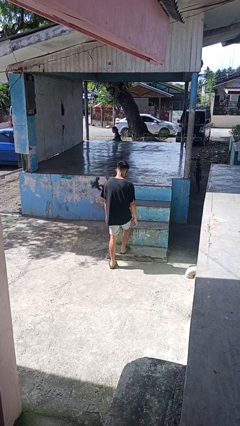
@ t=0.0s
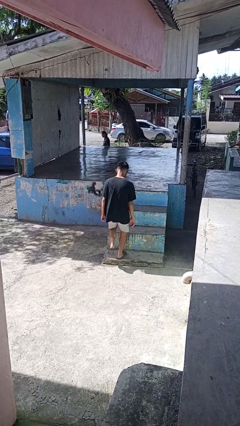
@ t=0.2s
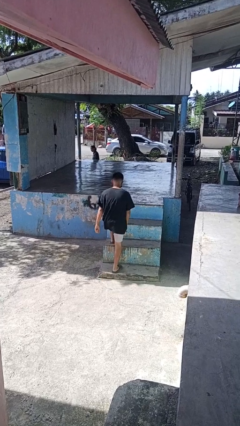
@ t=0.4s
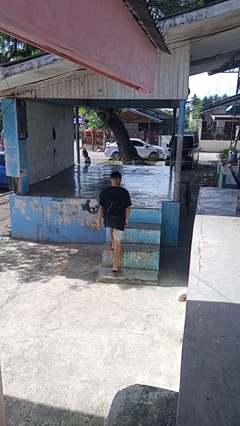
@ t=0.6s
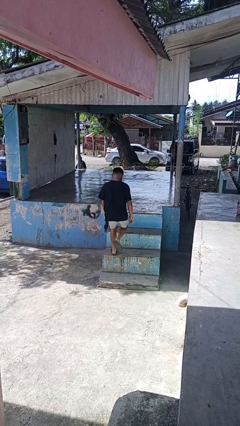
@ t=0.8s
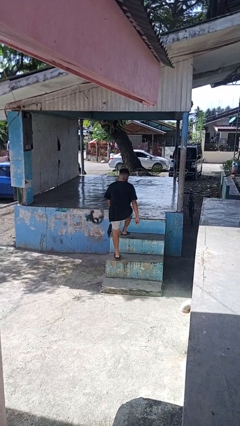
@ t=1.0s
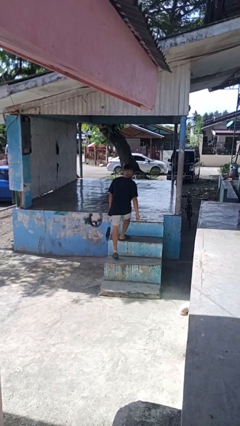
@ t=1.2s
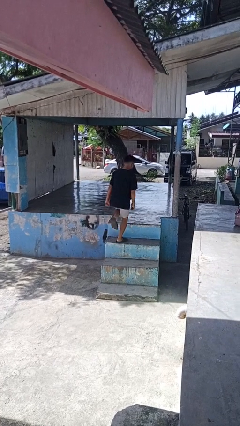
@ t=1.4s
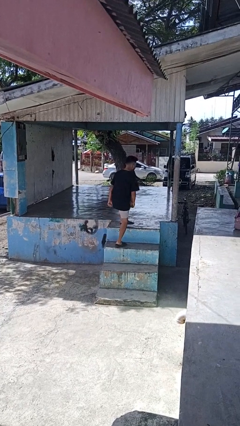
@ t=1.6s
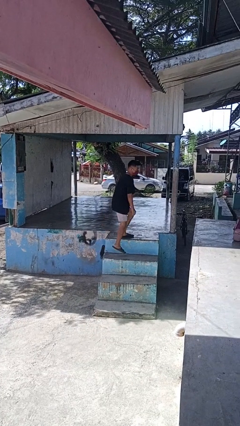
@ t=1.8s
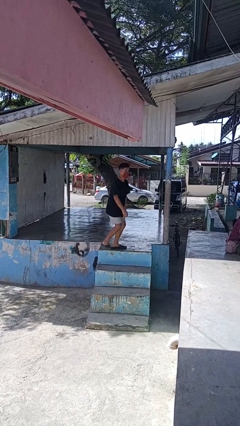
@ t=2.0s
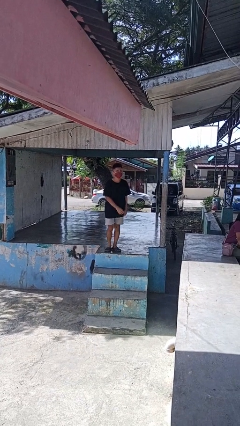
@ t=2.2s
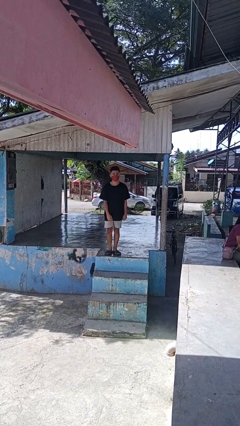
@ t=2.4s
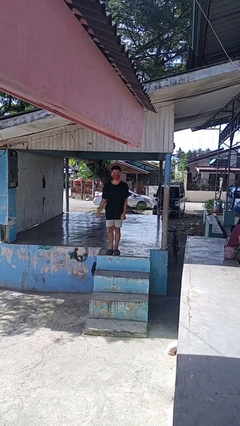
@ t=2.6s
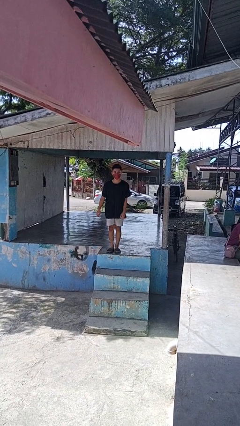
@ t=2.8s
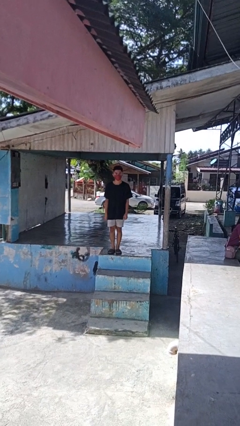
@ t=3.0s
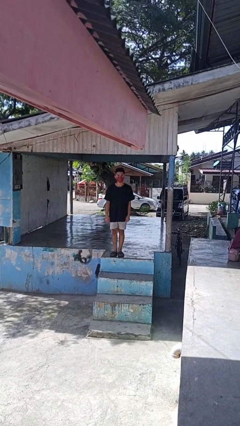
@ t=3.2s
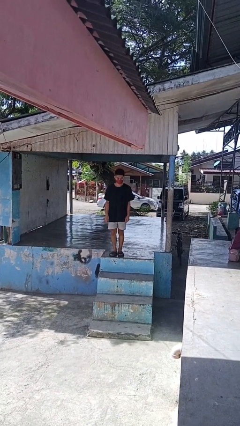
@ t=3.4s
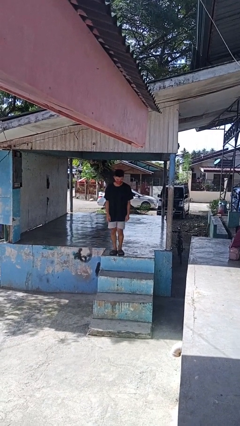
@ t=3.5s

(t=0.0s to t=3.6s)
person climbs up stairs

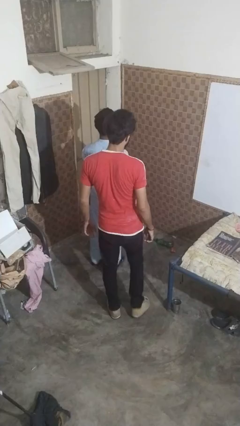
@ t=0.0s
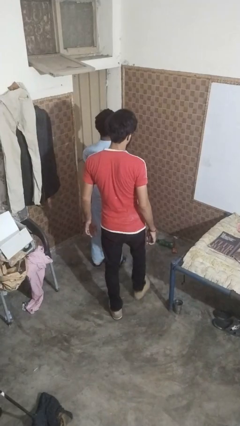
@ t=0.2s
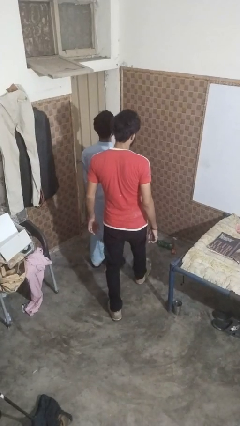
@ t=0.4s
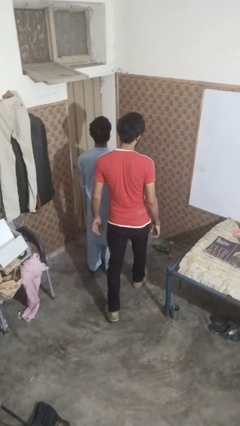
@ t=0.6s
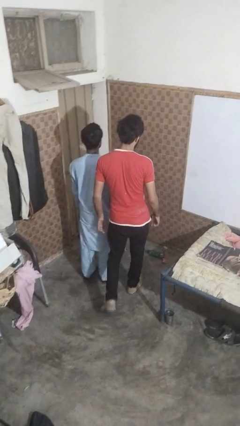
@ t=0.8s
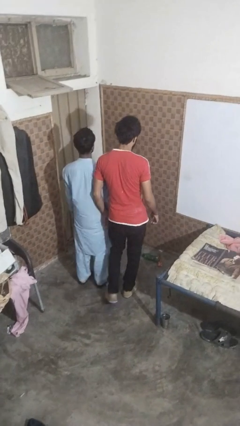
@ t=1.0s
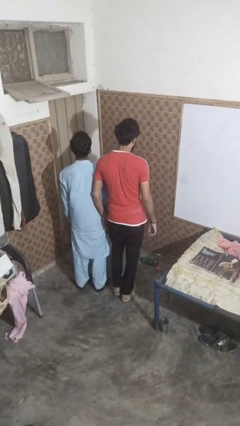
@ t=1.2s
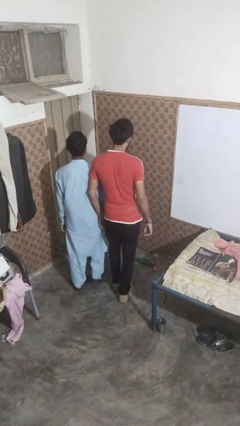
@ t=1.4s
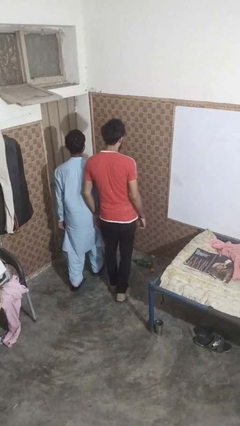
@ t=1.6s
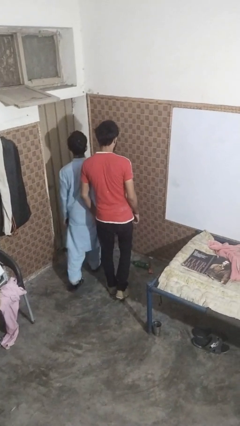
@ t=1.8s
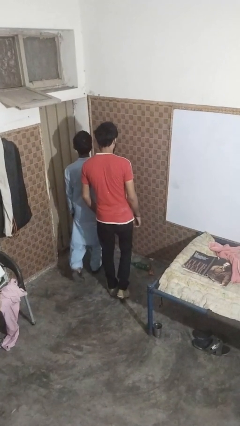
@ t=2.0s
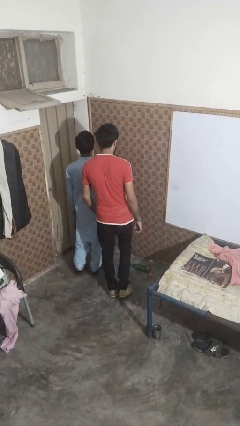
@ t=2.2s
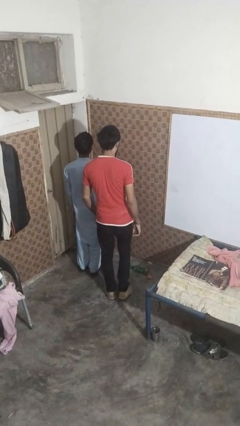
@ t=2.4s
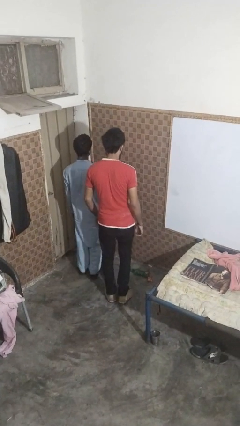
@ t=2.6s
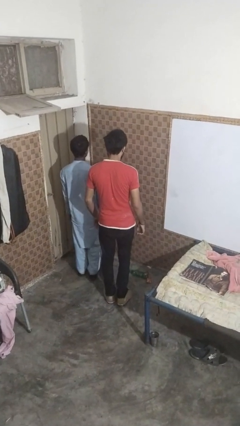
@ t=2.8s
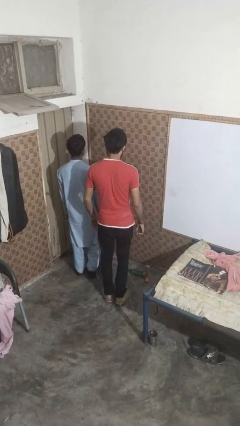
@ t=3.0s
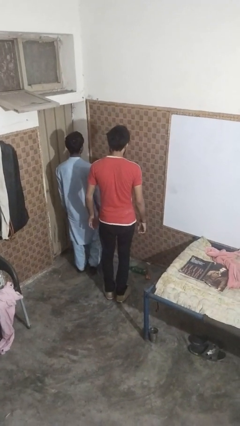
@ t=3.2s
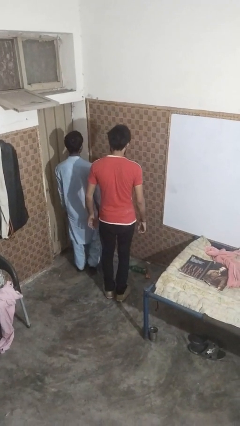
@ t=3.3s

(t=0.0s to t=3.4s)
person bumps into person

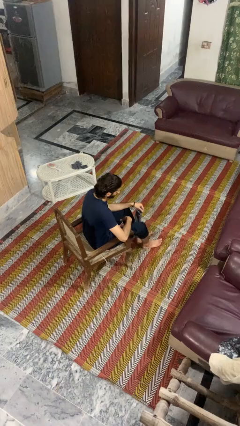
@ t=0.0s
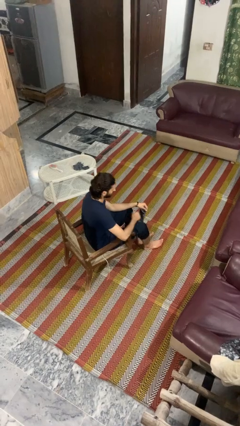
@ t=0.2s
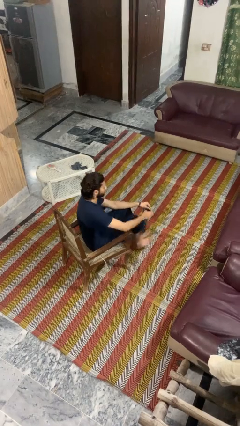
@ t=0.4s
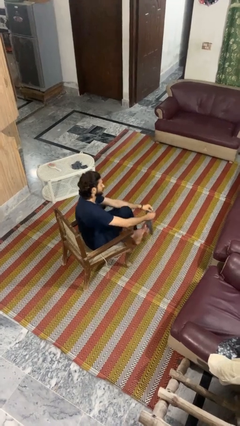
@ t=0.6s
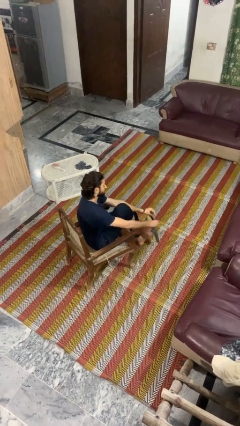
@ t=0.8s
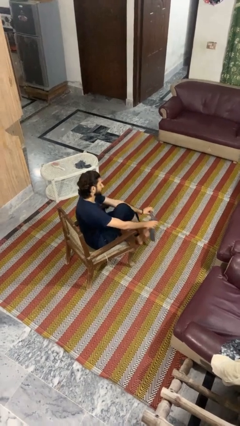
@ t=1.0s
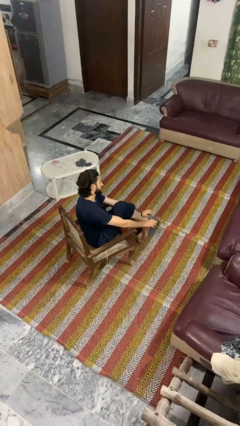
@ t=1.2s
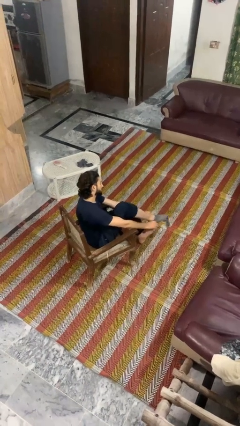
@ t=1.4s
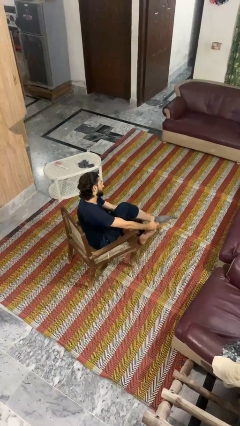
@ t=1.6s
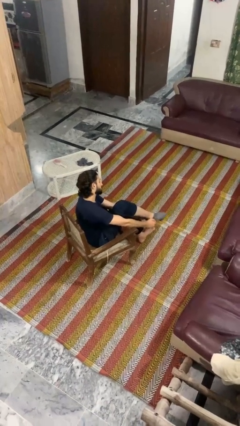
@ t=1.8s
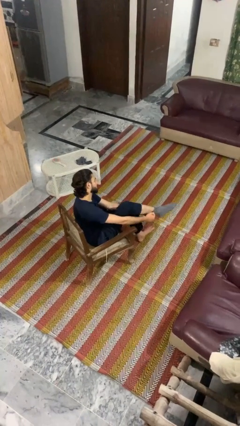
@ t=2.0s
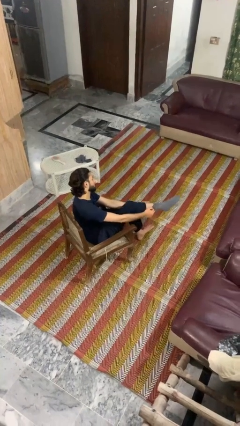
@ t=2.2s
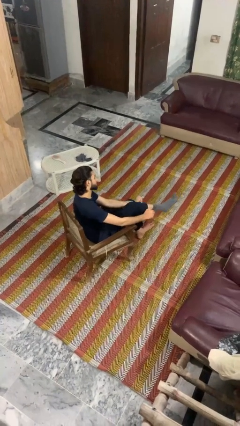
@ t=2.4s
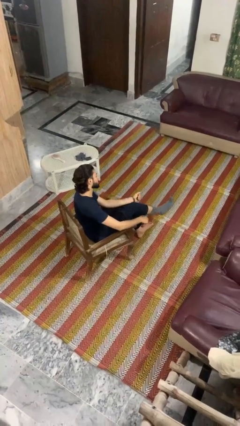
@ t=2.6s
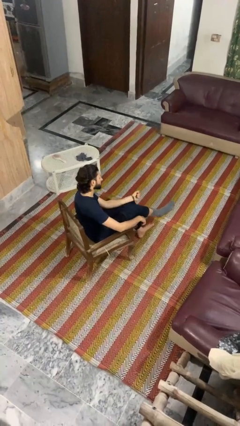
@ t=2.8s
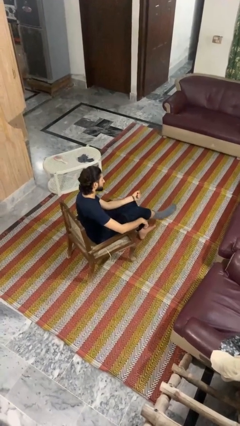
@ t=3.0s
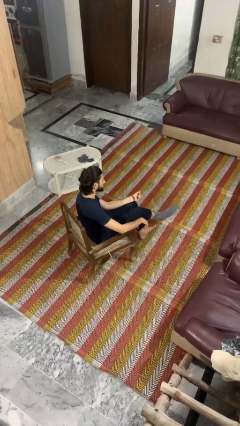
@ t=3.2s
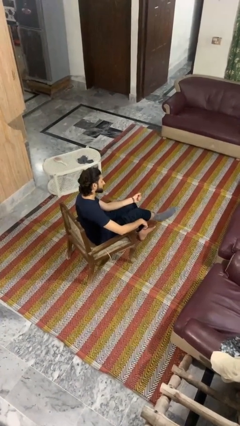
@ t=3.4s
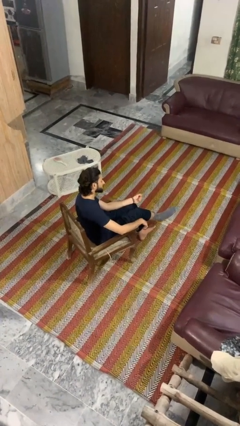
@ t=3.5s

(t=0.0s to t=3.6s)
person puts on socks

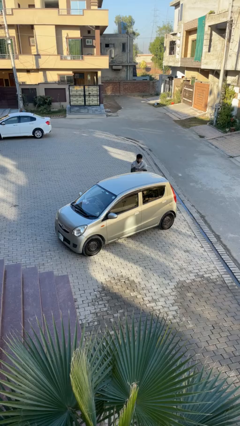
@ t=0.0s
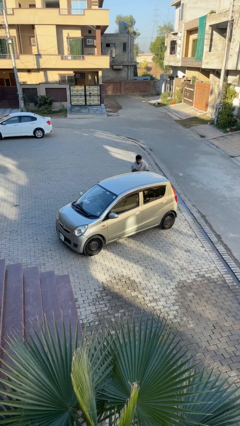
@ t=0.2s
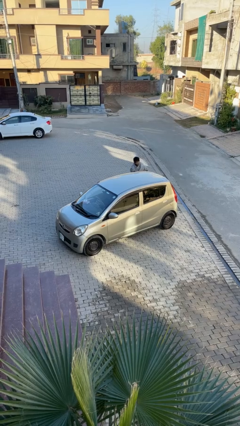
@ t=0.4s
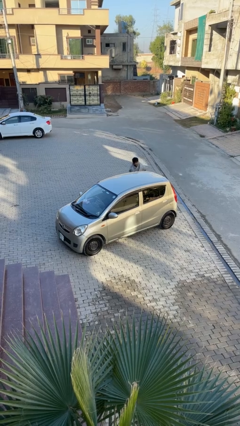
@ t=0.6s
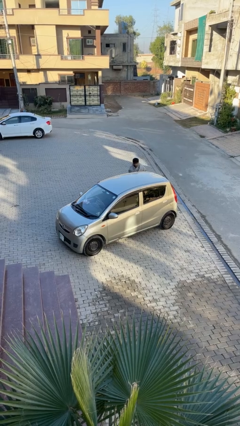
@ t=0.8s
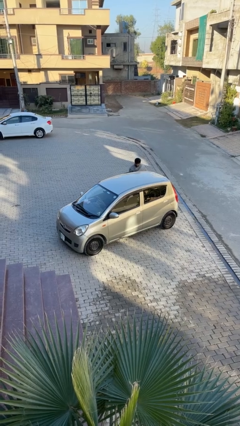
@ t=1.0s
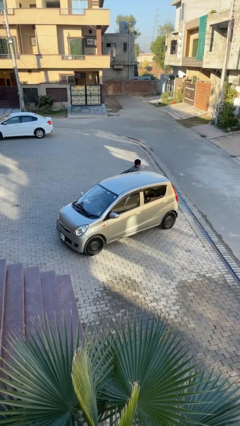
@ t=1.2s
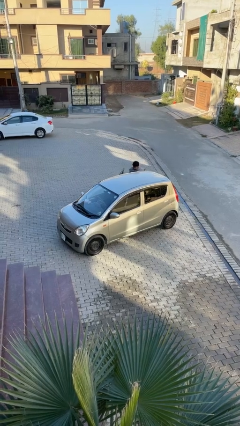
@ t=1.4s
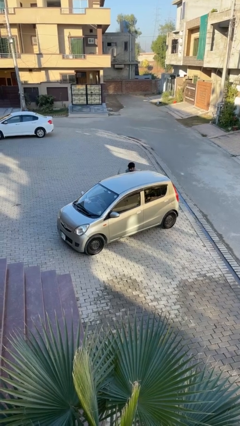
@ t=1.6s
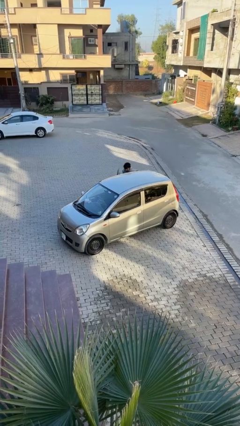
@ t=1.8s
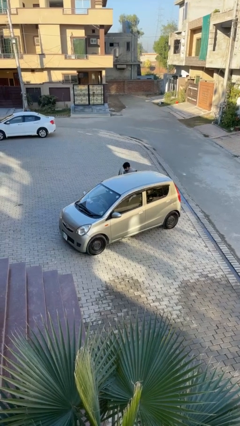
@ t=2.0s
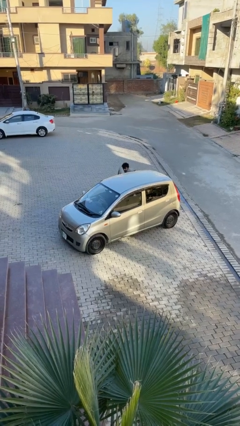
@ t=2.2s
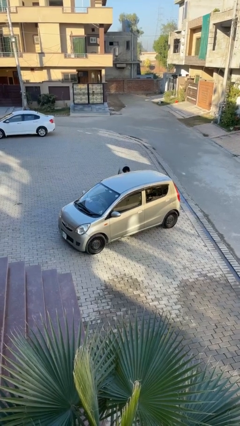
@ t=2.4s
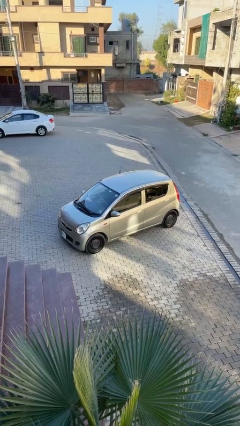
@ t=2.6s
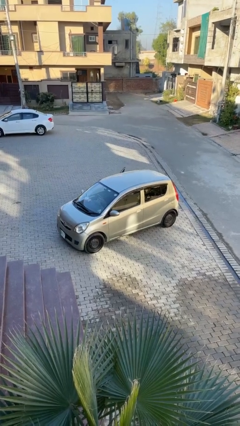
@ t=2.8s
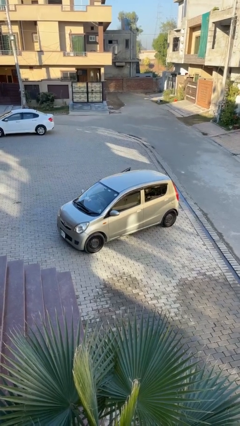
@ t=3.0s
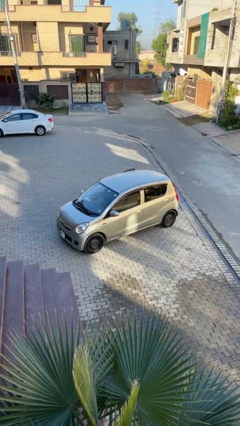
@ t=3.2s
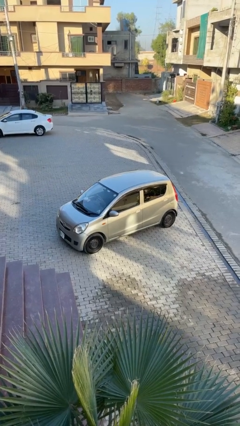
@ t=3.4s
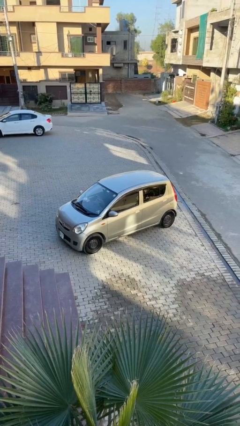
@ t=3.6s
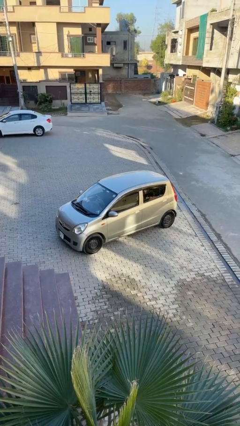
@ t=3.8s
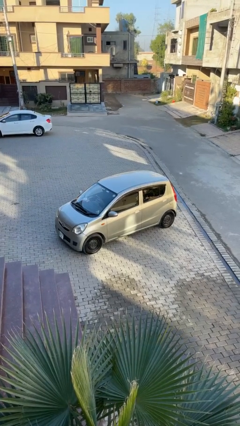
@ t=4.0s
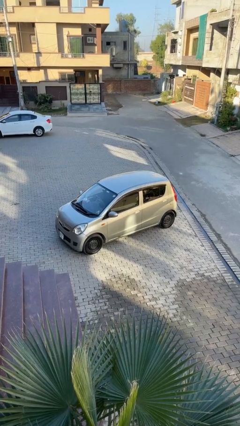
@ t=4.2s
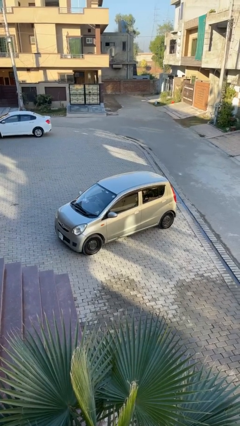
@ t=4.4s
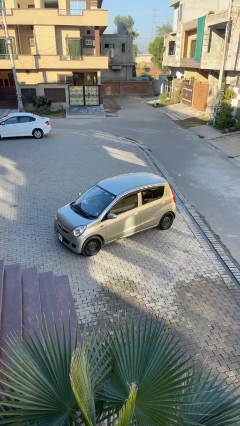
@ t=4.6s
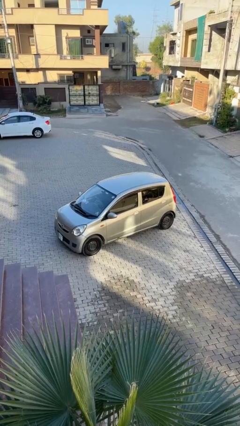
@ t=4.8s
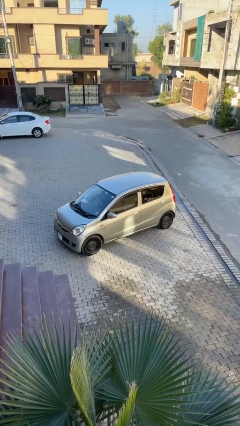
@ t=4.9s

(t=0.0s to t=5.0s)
car picks up person

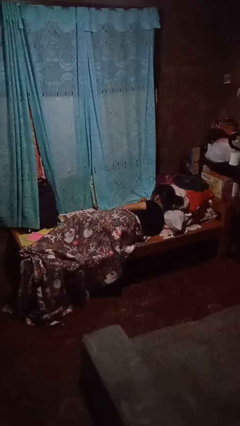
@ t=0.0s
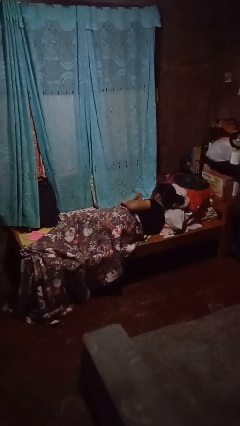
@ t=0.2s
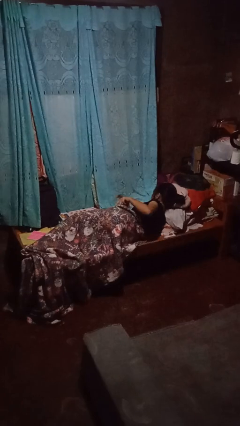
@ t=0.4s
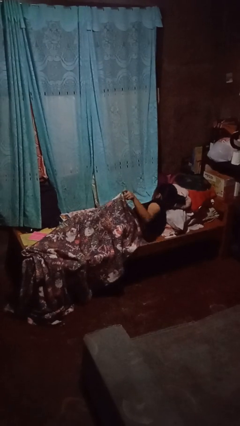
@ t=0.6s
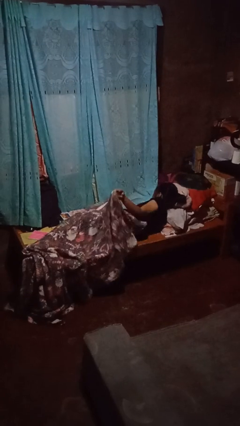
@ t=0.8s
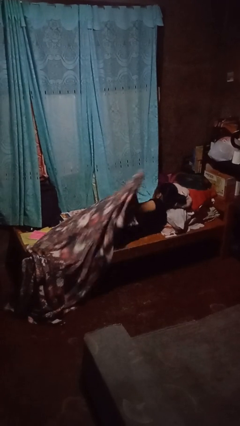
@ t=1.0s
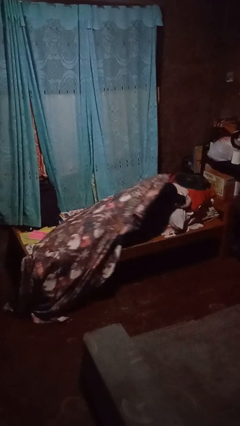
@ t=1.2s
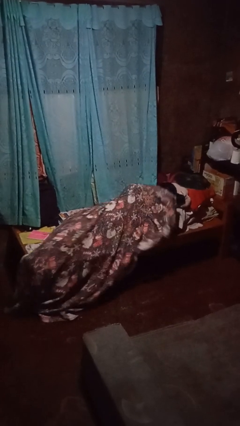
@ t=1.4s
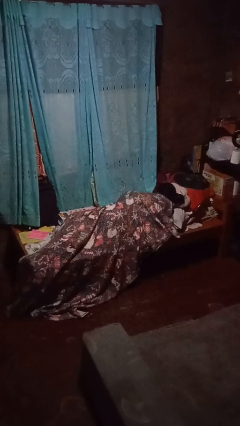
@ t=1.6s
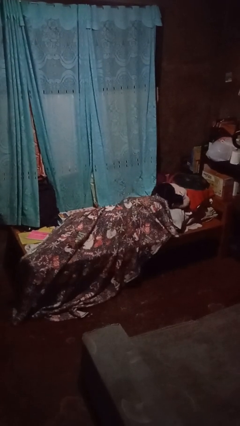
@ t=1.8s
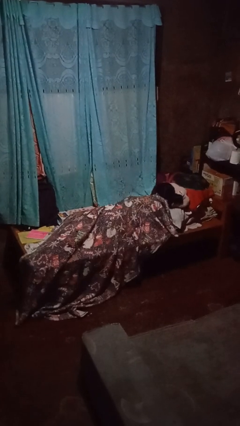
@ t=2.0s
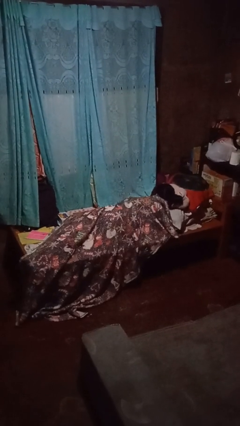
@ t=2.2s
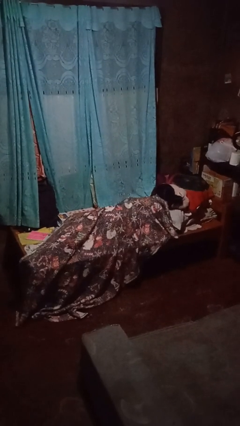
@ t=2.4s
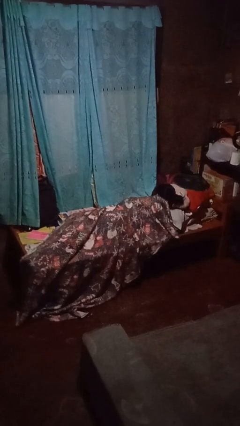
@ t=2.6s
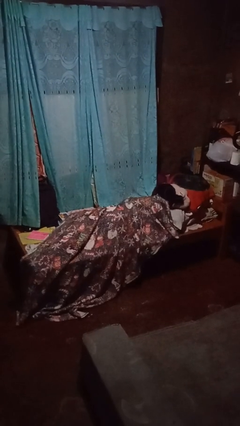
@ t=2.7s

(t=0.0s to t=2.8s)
person covers with bedsheets
